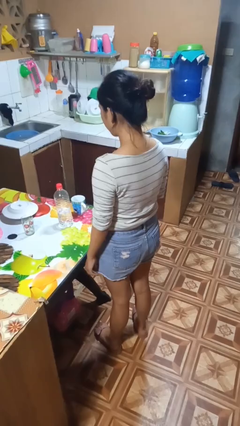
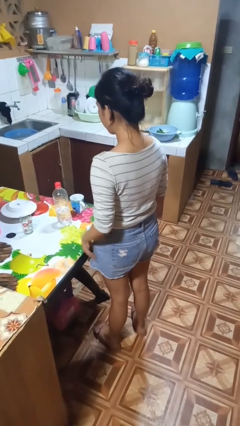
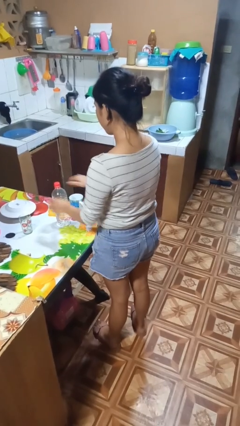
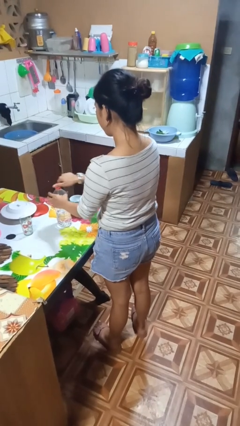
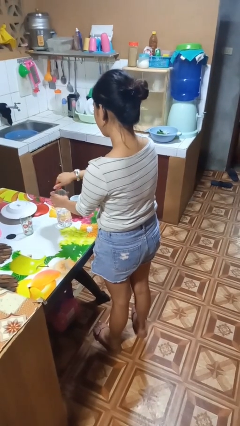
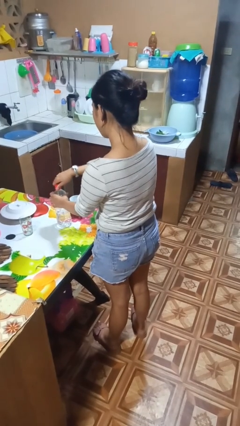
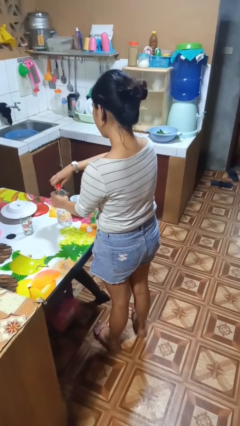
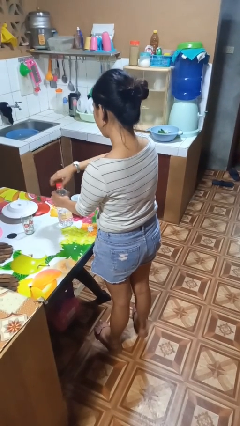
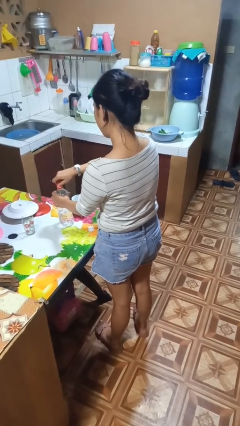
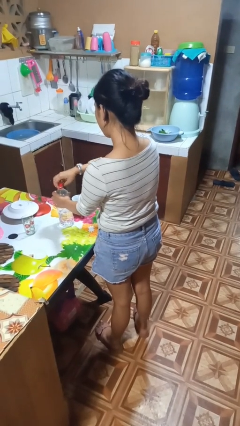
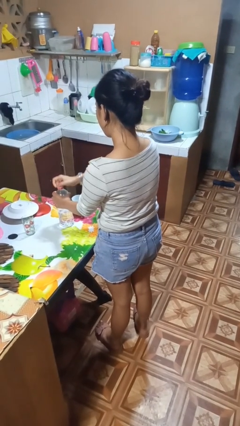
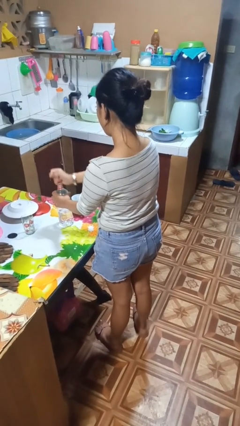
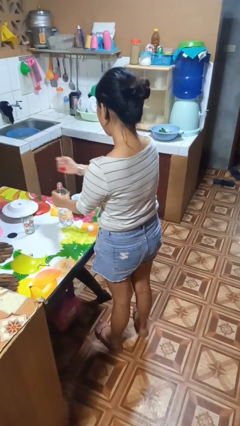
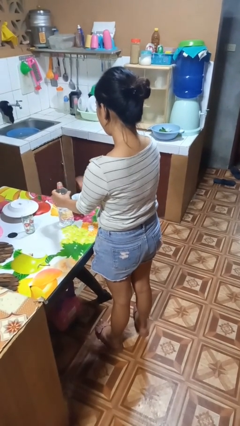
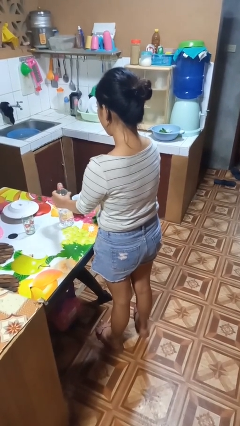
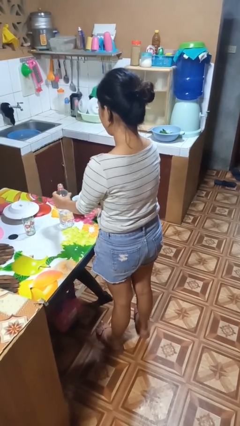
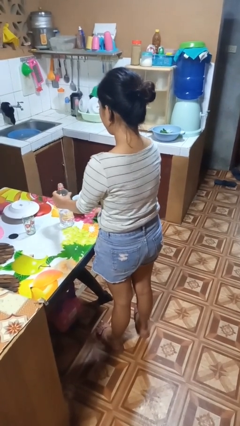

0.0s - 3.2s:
person unscrews lid from bottle

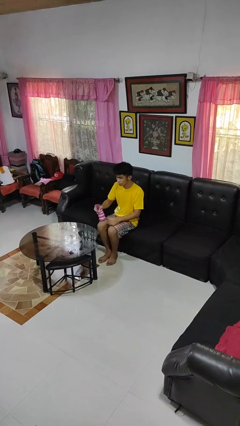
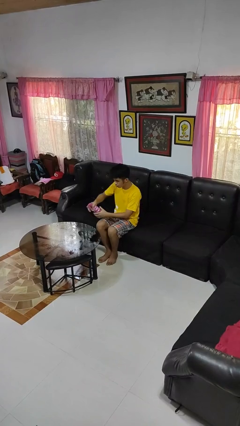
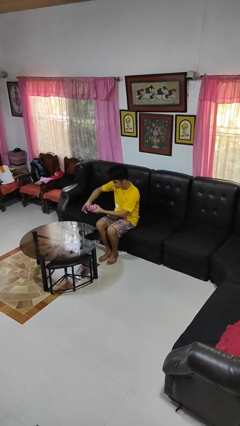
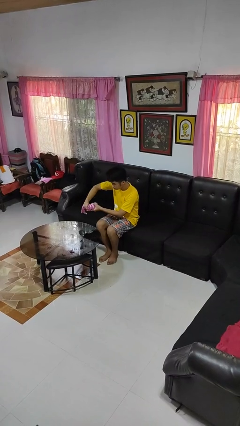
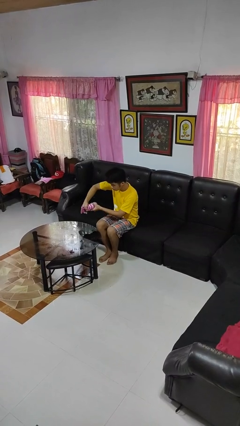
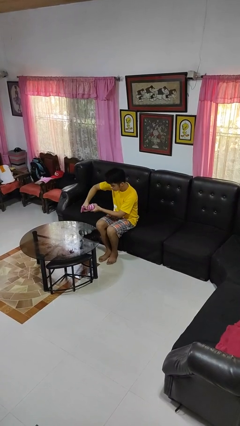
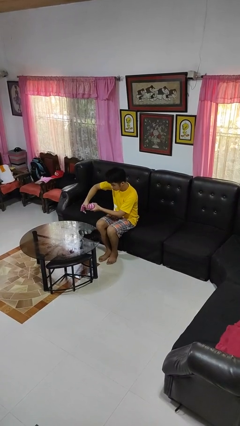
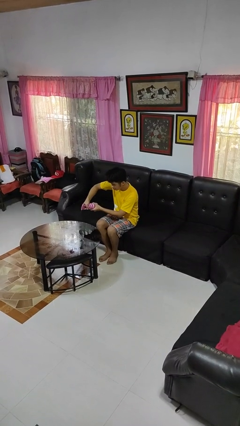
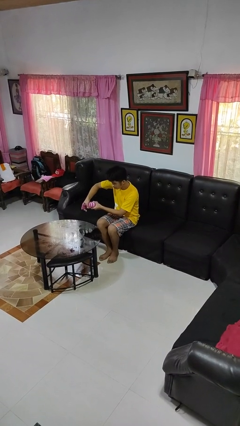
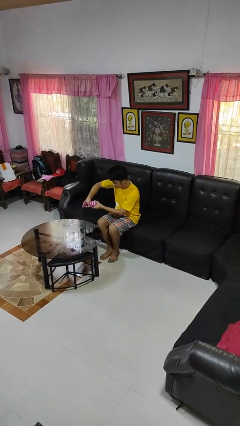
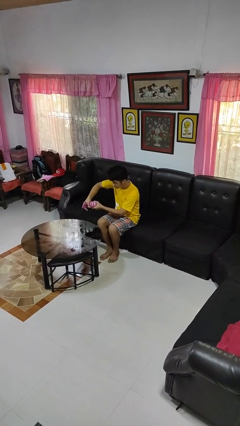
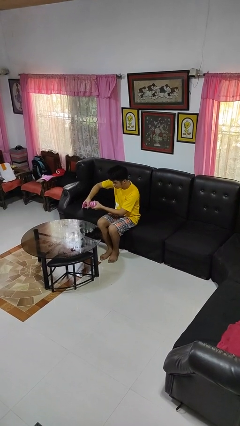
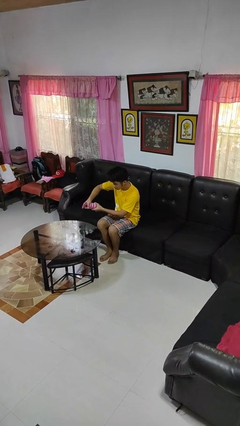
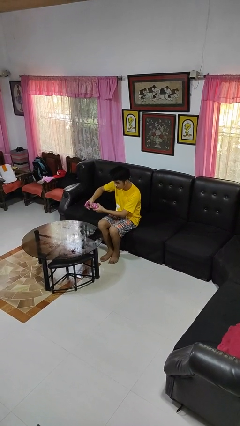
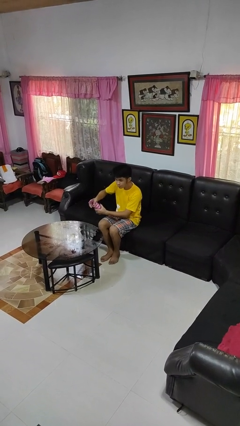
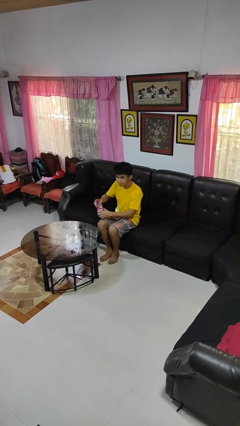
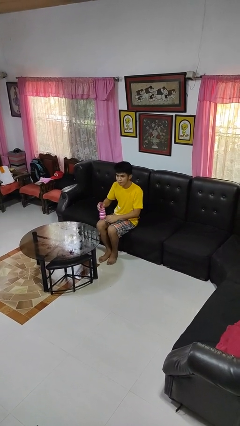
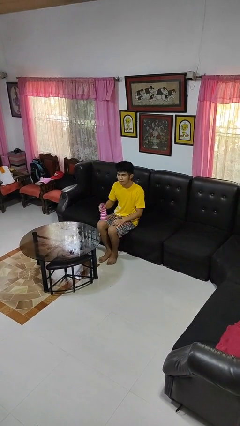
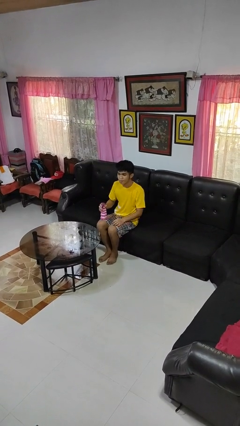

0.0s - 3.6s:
person sprays from bottle

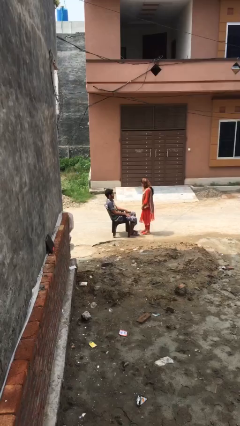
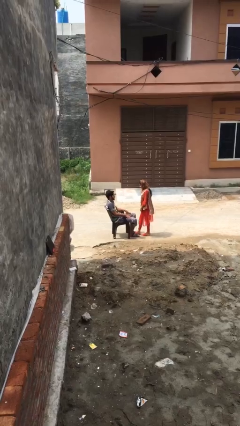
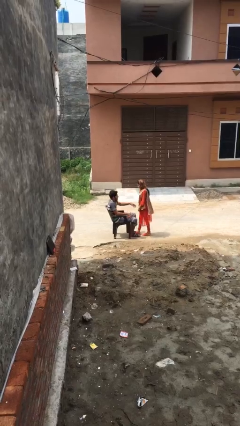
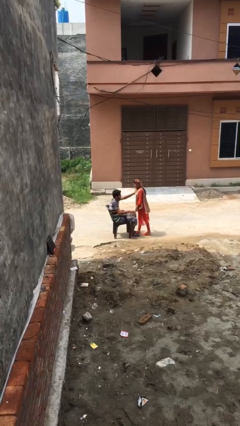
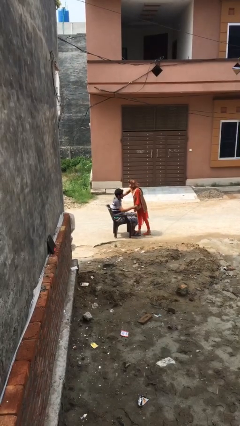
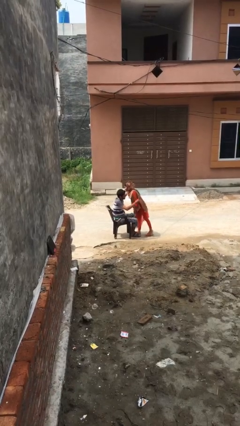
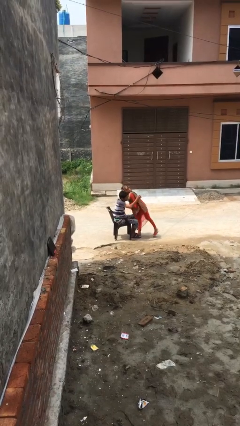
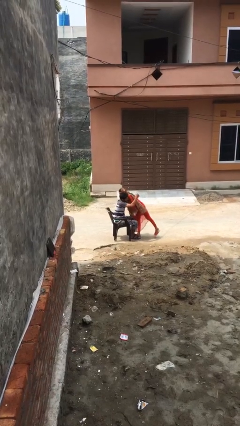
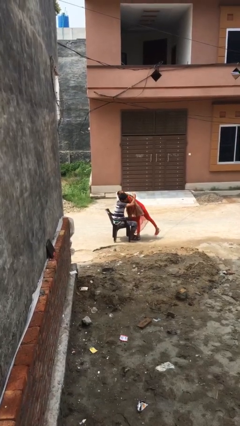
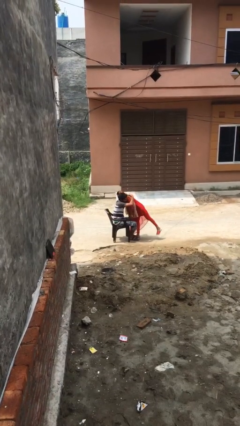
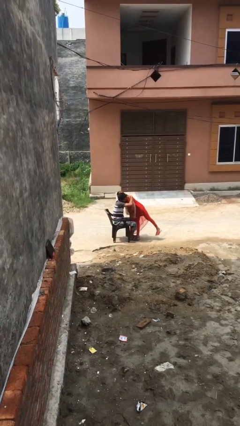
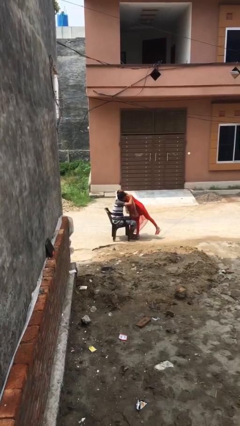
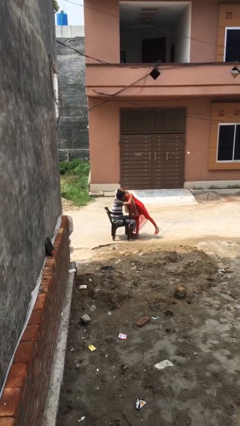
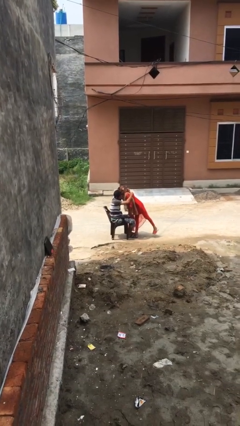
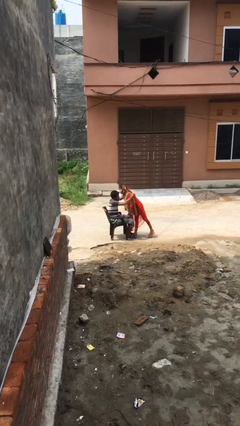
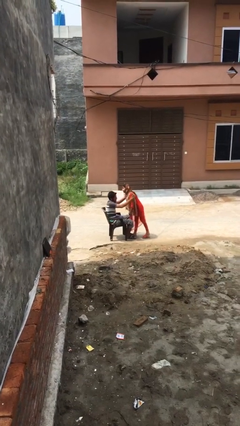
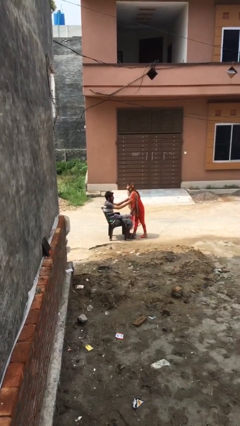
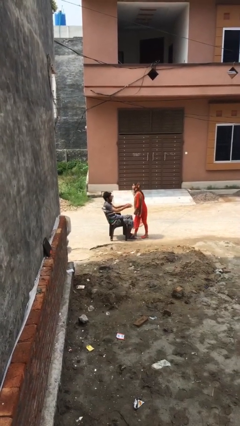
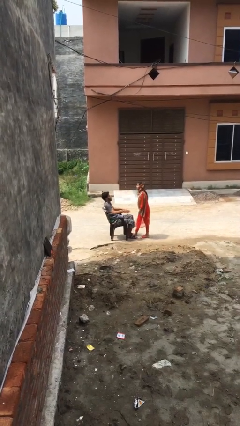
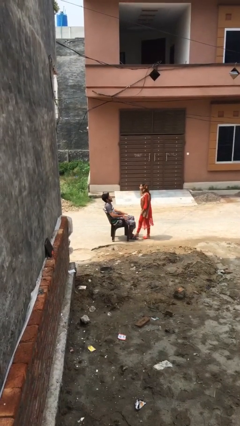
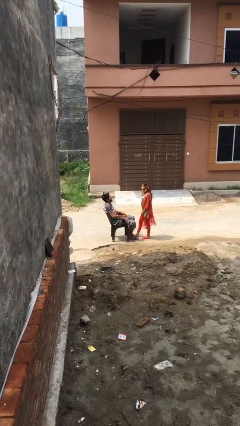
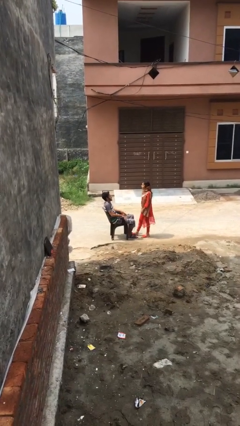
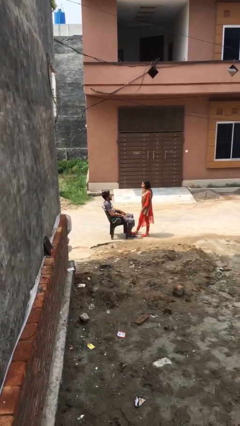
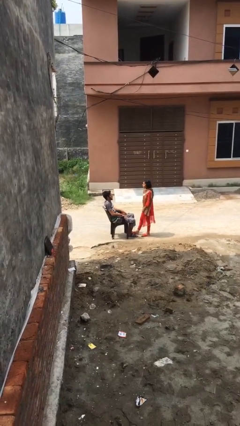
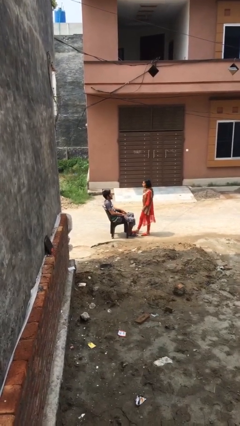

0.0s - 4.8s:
person embraces person

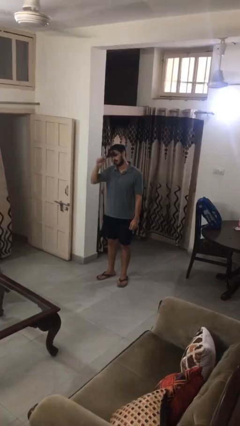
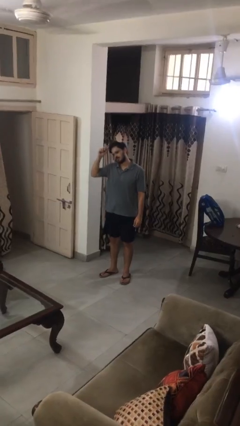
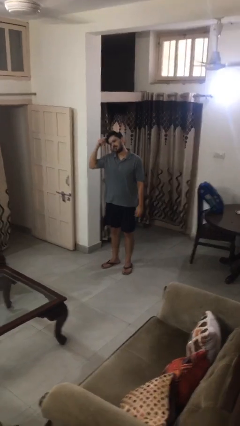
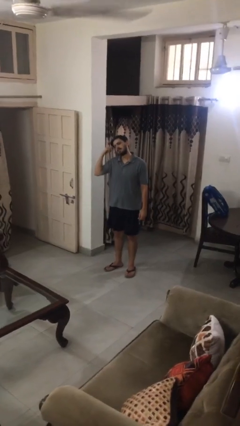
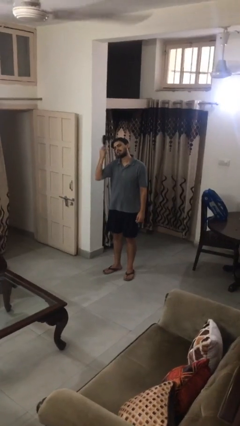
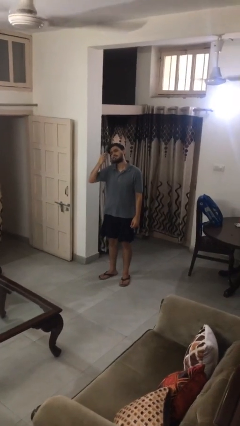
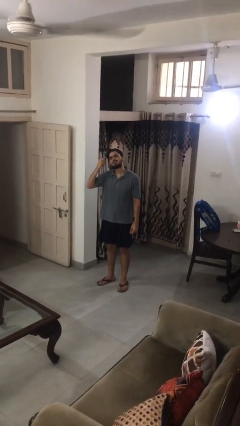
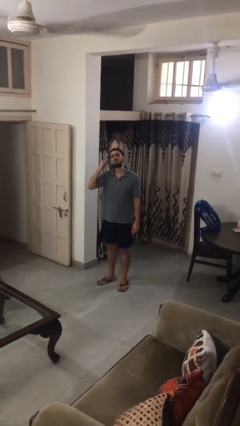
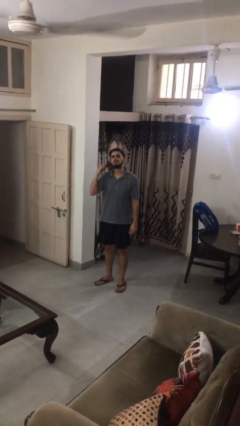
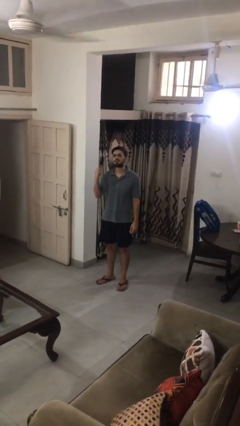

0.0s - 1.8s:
person brushes hair

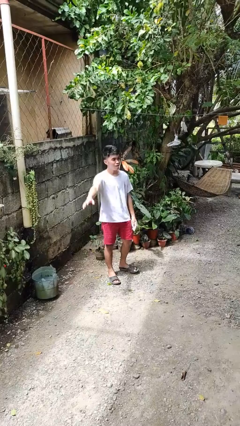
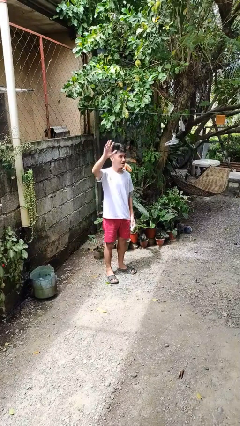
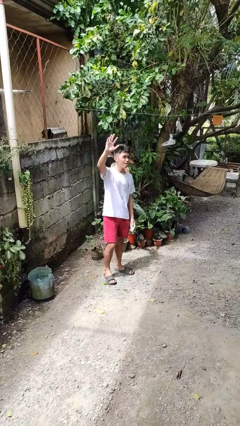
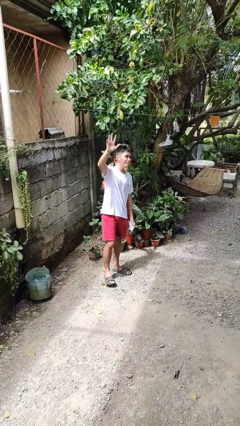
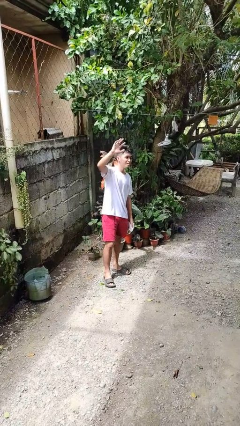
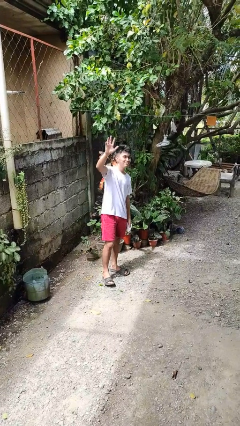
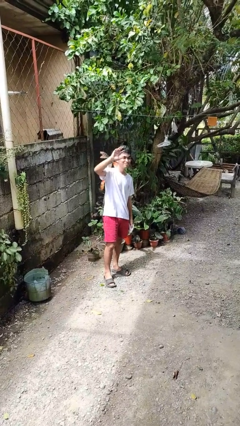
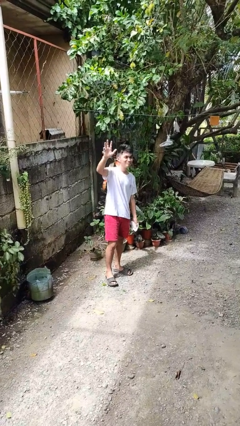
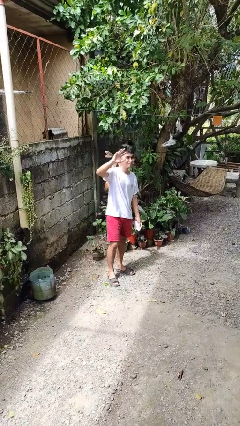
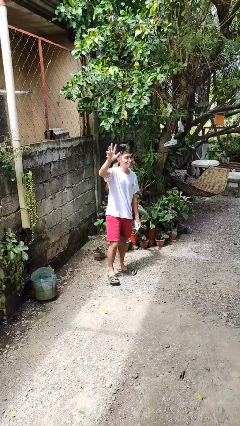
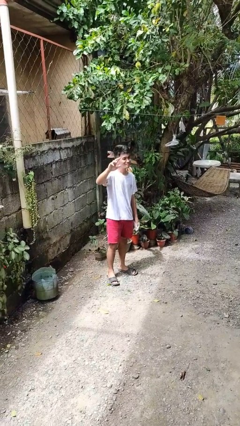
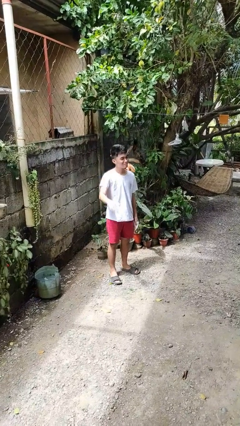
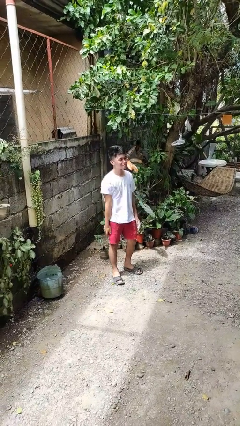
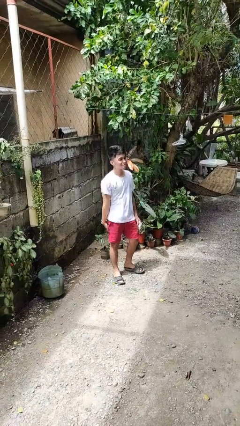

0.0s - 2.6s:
person waves at person

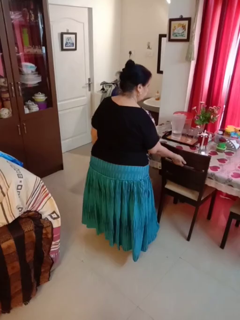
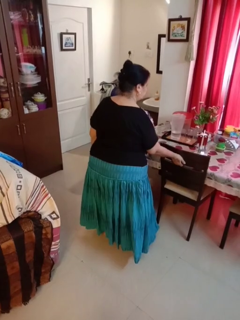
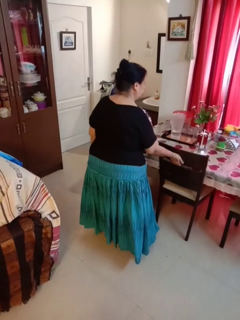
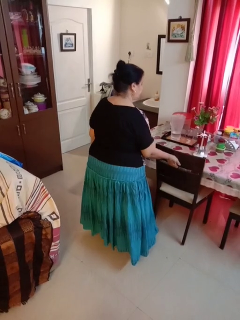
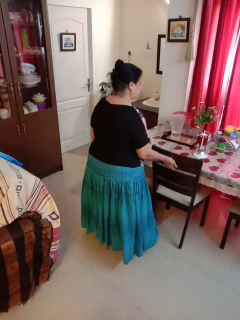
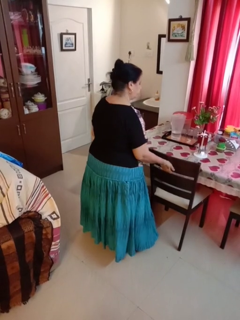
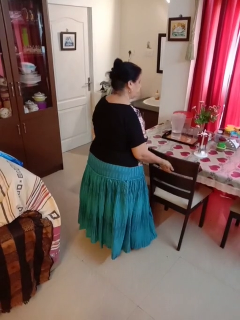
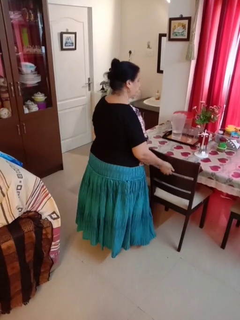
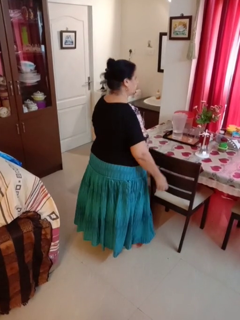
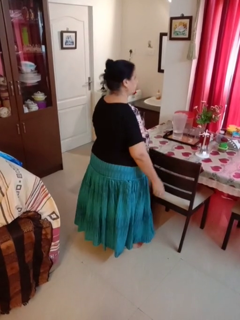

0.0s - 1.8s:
person pulls out chair

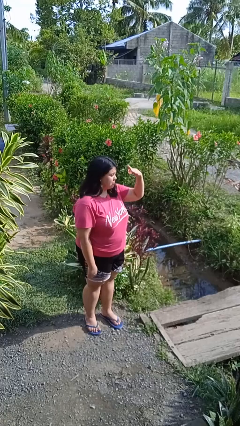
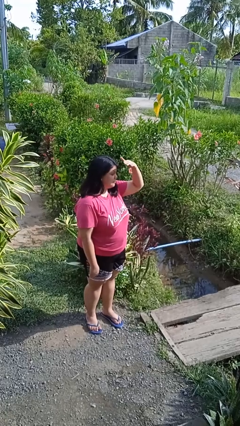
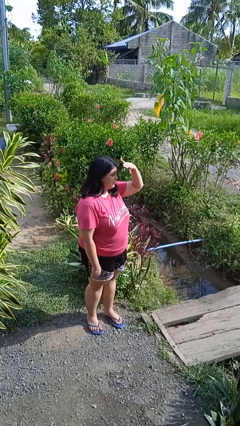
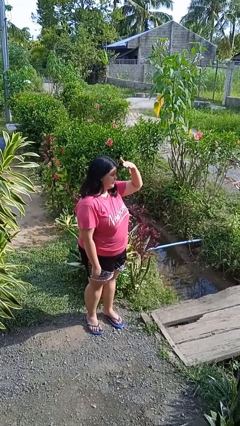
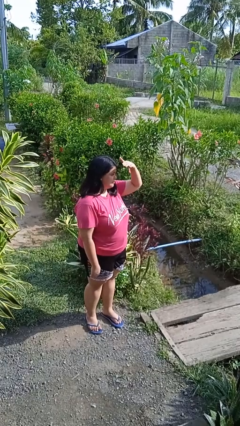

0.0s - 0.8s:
person shades eyes
